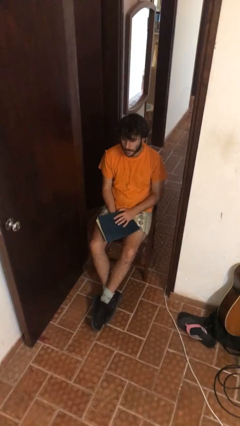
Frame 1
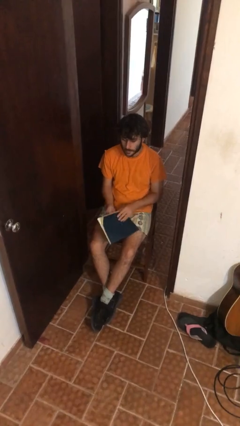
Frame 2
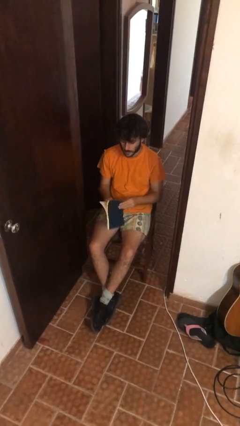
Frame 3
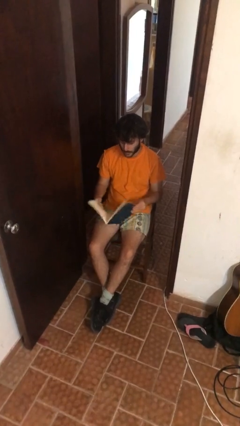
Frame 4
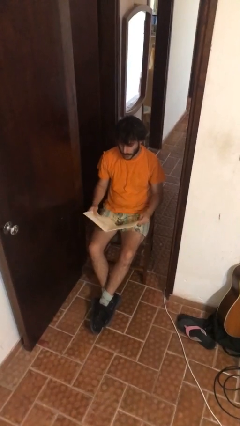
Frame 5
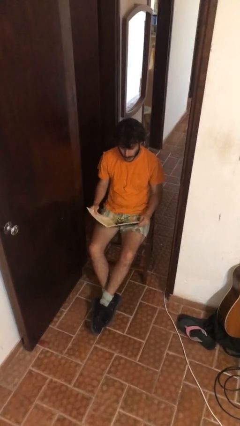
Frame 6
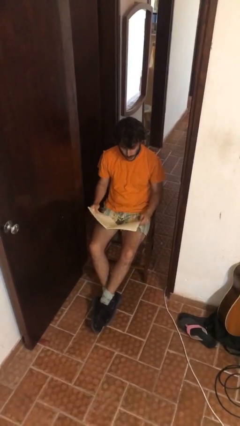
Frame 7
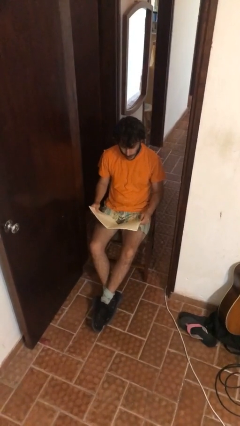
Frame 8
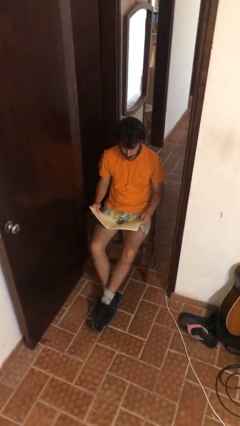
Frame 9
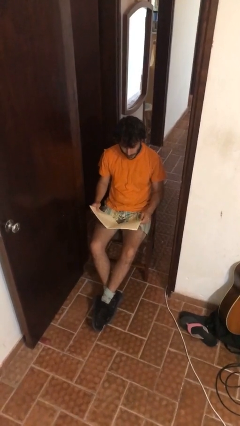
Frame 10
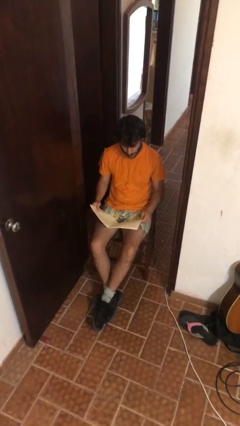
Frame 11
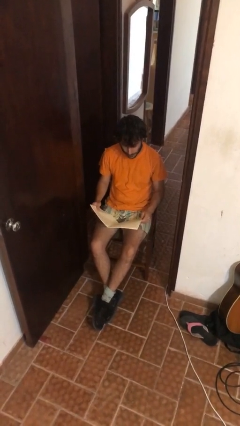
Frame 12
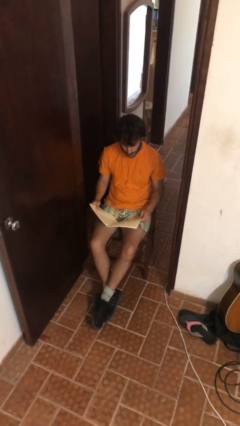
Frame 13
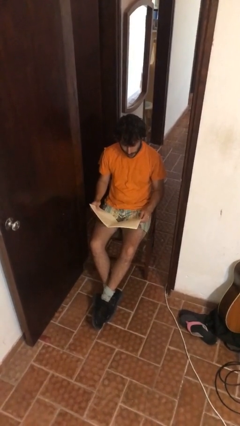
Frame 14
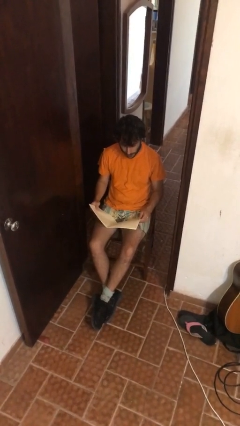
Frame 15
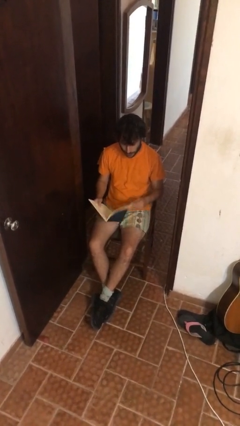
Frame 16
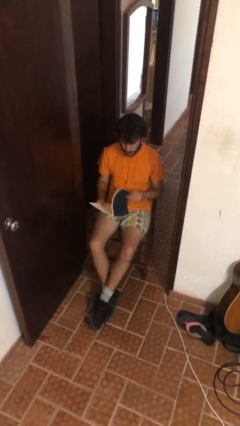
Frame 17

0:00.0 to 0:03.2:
person reads document

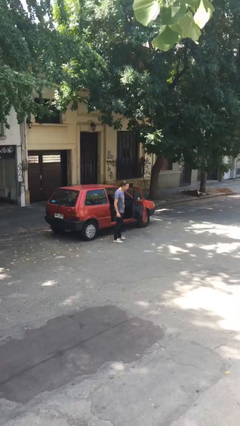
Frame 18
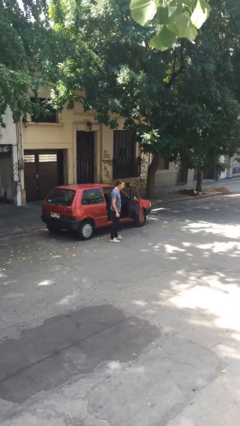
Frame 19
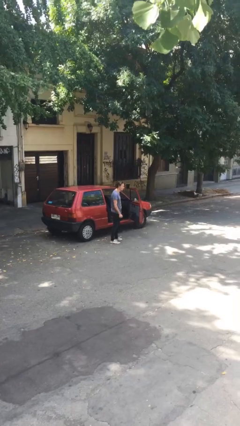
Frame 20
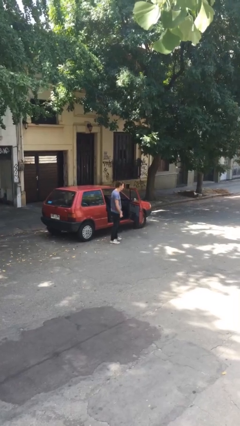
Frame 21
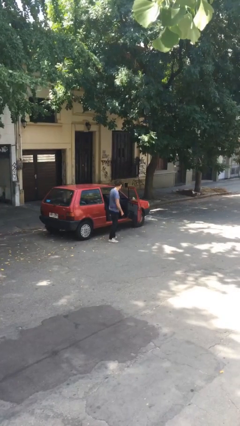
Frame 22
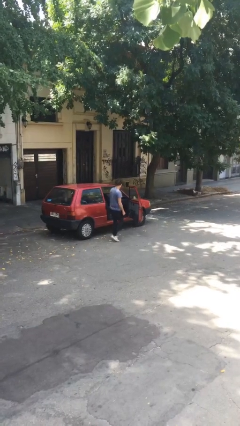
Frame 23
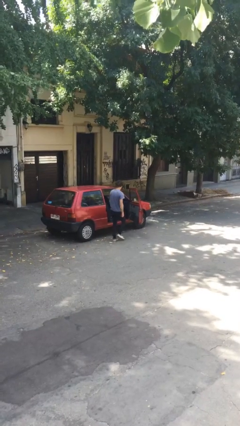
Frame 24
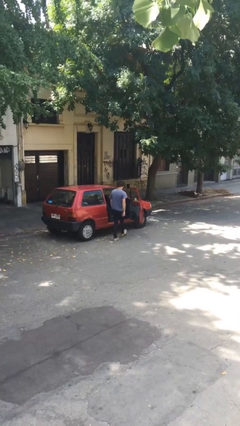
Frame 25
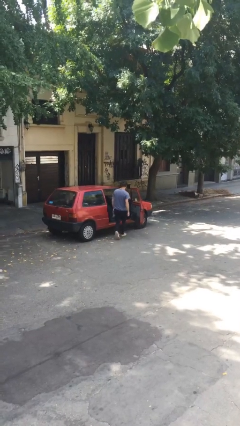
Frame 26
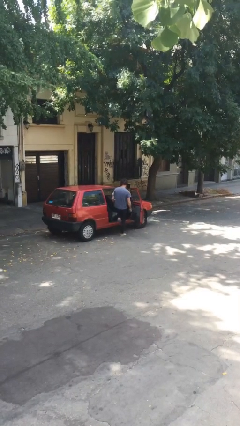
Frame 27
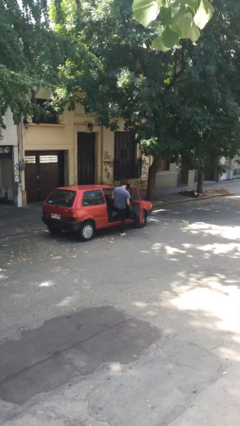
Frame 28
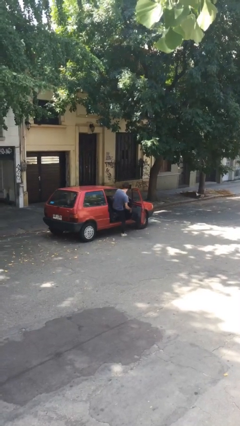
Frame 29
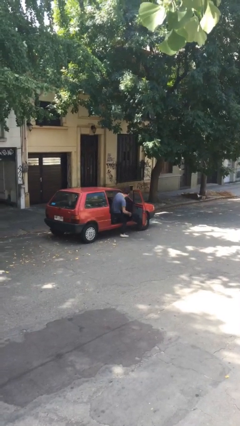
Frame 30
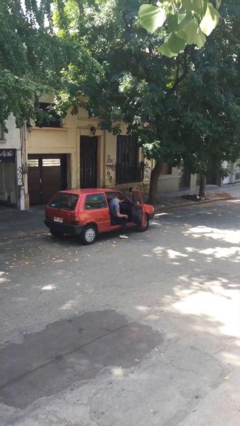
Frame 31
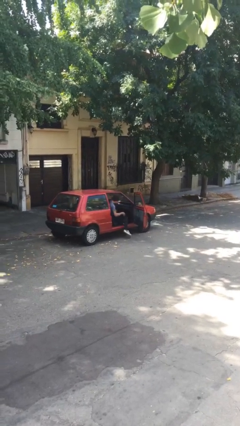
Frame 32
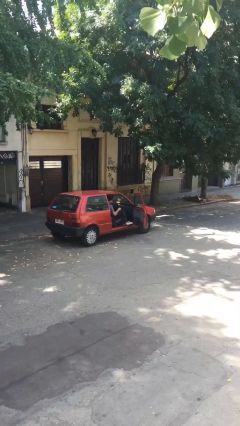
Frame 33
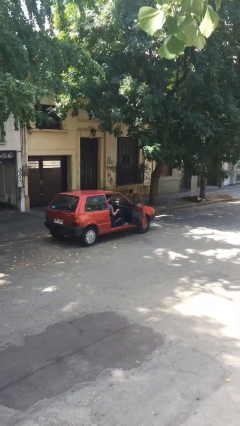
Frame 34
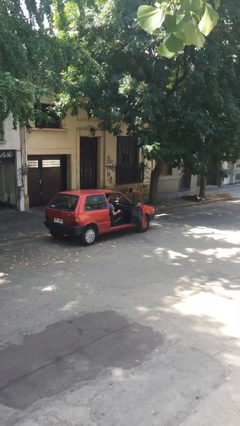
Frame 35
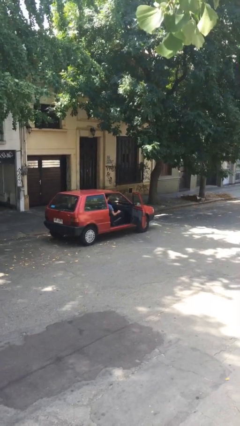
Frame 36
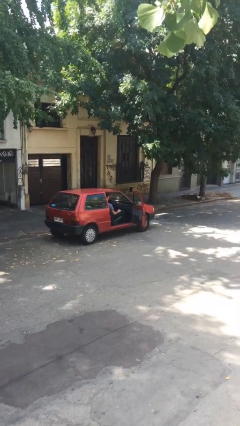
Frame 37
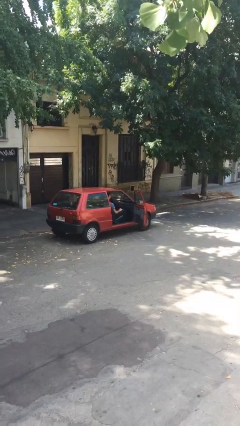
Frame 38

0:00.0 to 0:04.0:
person enters car

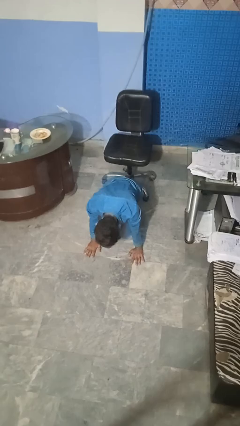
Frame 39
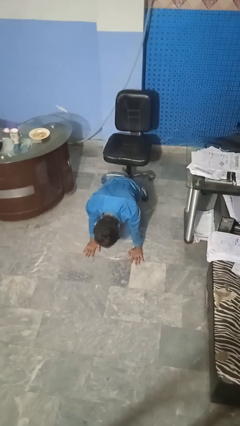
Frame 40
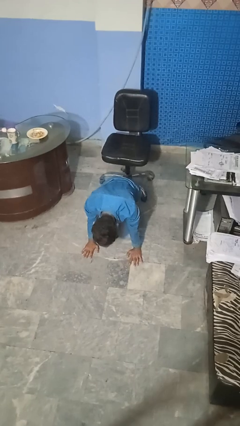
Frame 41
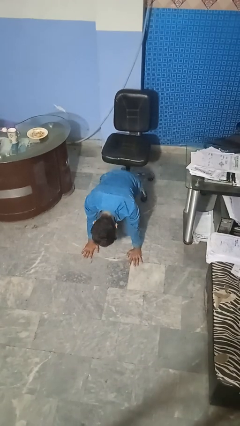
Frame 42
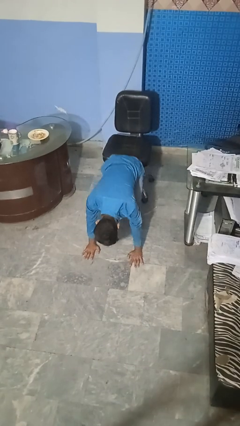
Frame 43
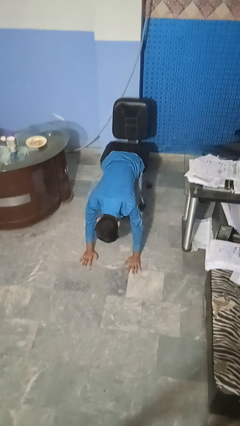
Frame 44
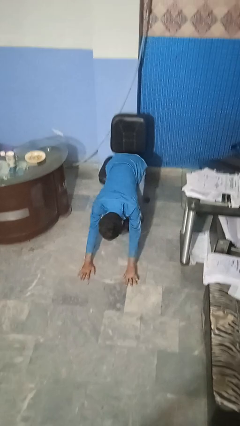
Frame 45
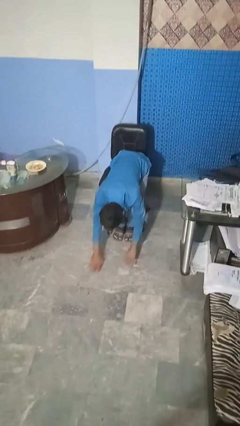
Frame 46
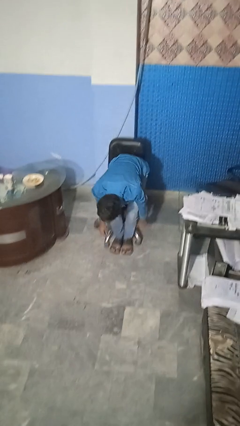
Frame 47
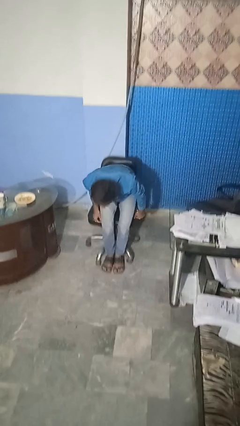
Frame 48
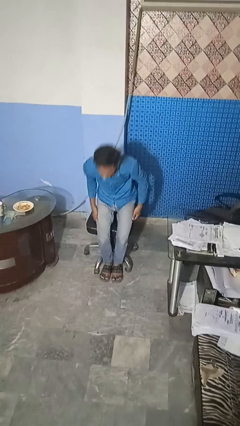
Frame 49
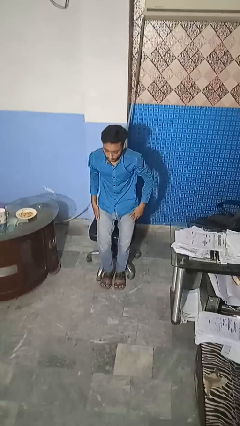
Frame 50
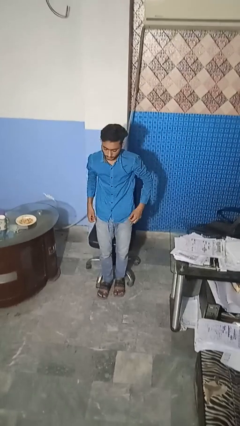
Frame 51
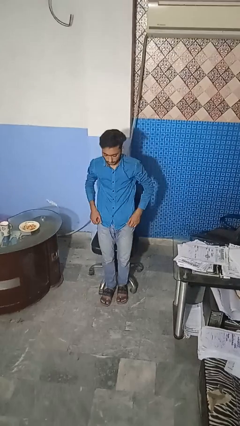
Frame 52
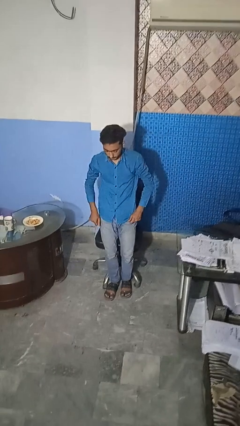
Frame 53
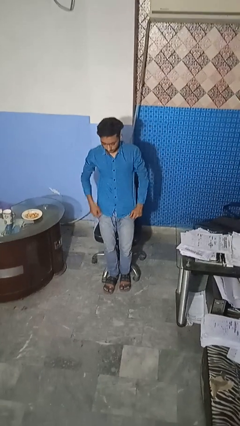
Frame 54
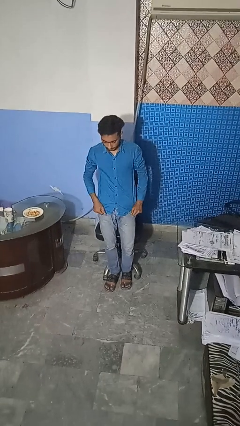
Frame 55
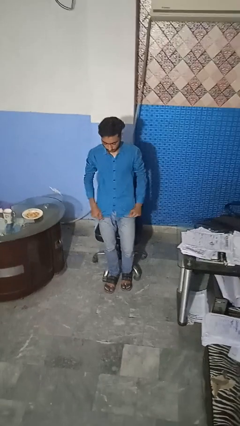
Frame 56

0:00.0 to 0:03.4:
person stands up from floor

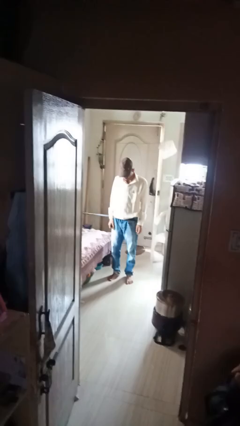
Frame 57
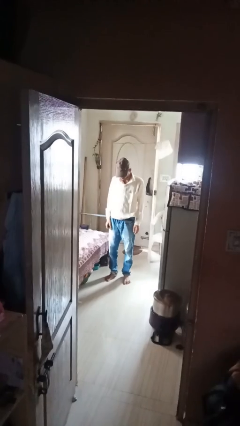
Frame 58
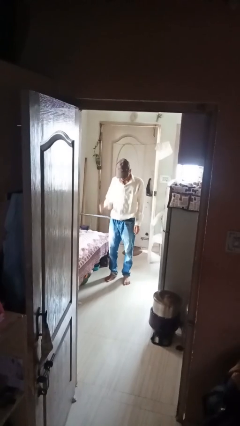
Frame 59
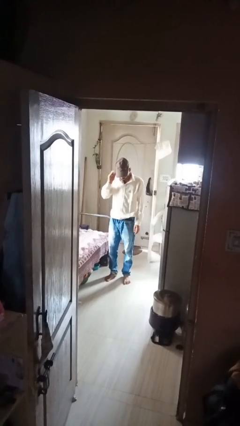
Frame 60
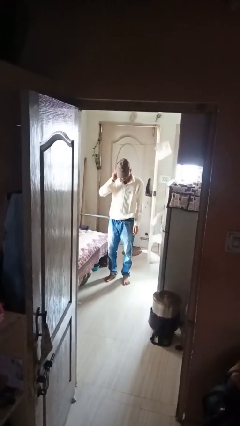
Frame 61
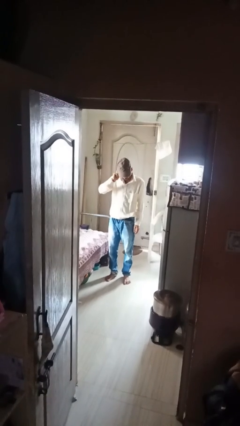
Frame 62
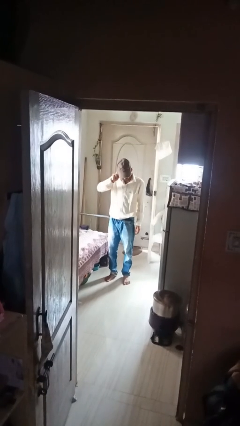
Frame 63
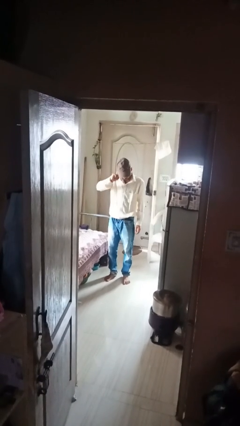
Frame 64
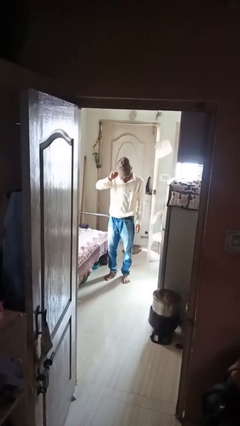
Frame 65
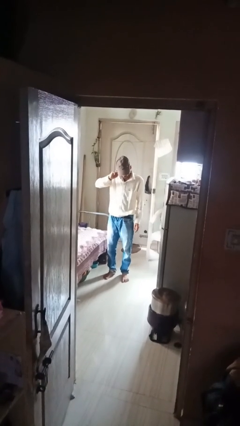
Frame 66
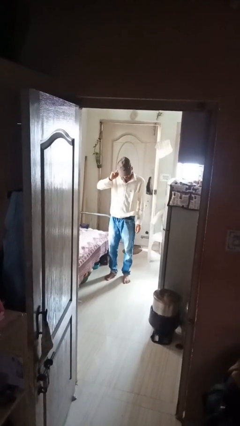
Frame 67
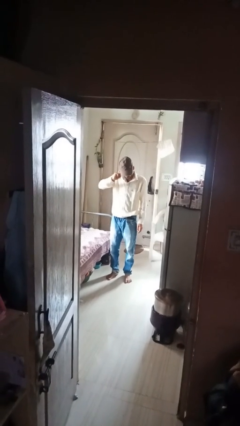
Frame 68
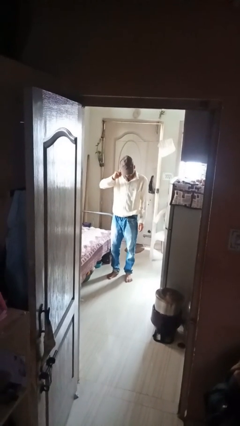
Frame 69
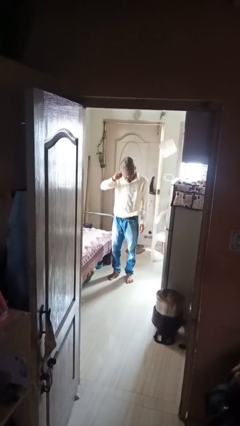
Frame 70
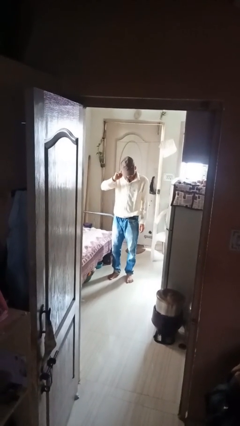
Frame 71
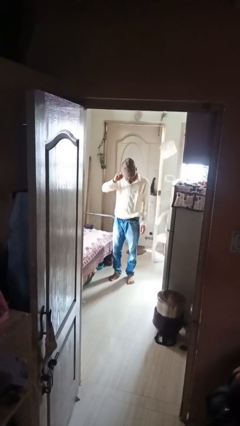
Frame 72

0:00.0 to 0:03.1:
person touches earlobe

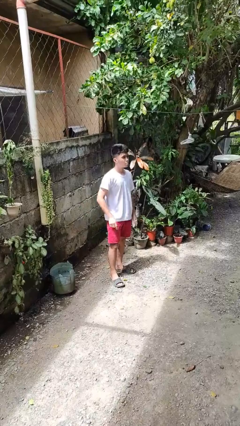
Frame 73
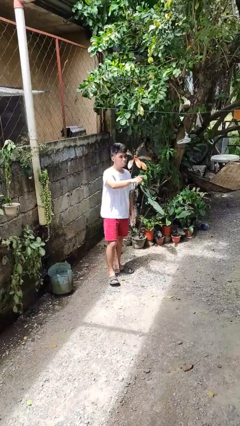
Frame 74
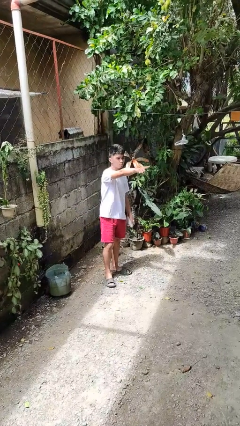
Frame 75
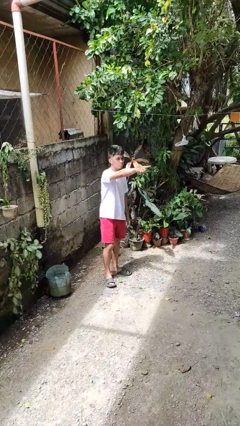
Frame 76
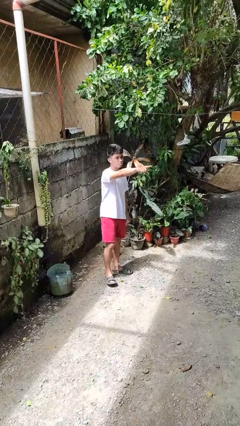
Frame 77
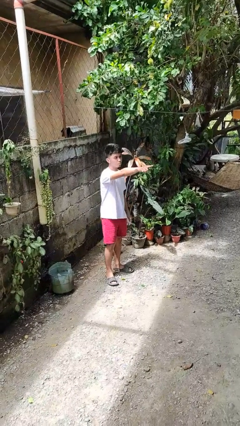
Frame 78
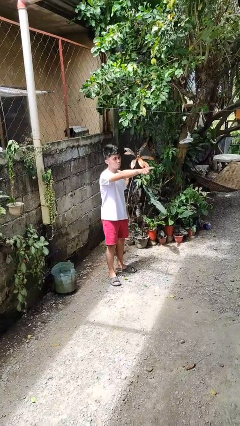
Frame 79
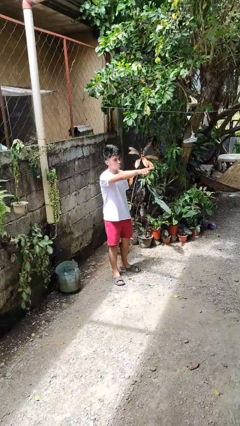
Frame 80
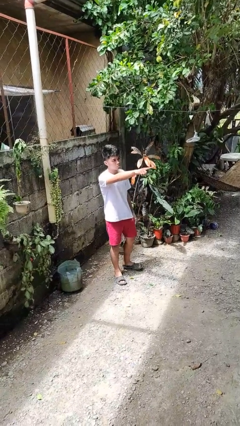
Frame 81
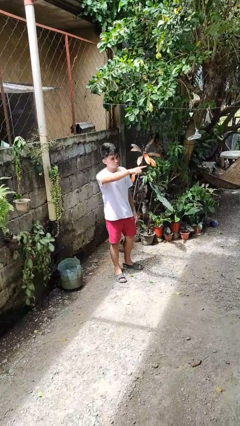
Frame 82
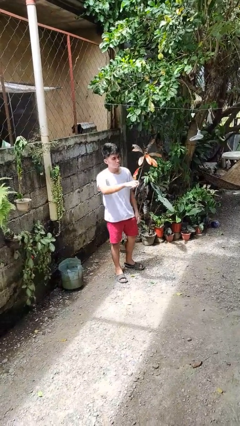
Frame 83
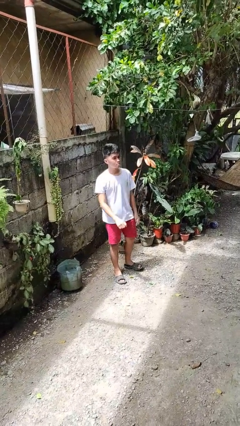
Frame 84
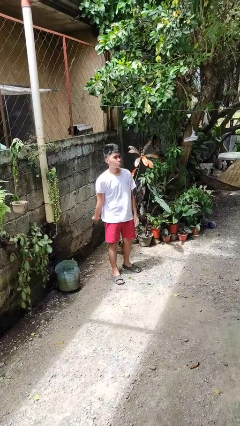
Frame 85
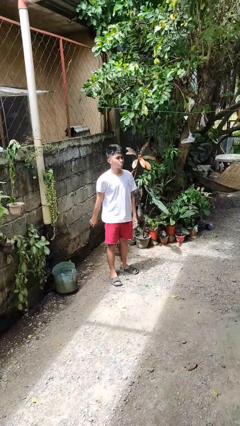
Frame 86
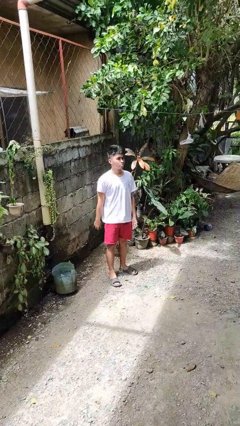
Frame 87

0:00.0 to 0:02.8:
person points at person

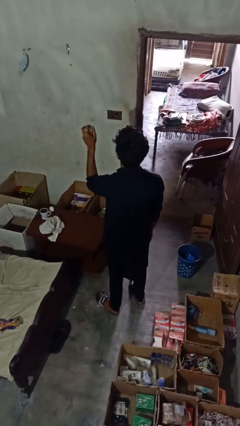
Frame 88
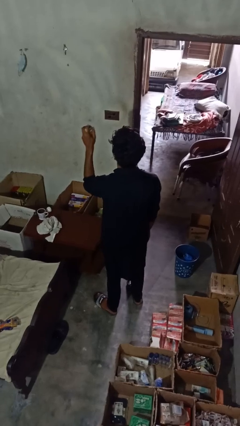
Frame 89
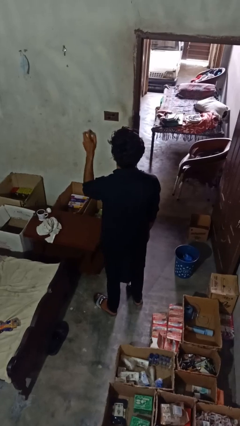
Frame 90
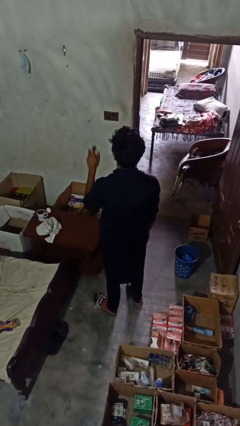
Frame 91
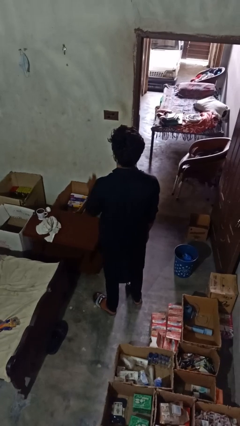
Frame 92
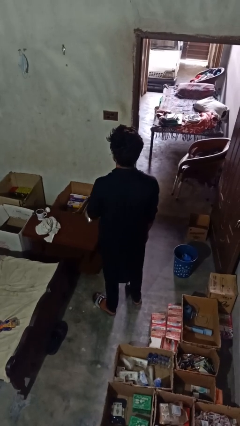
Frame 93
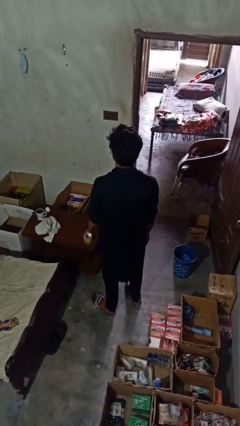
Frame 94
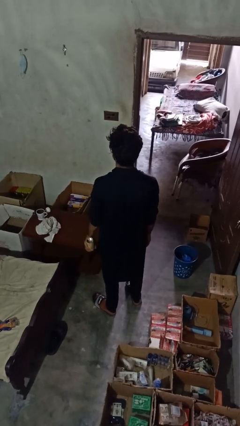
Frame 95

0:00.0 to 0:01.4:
person sprays from bottle
